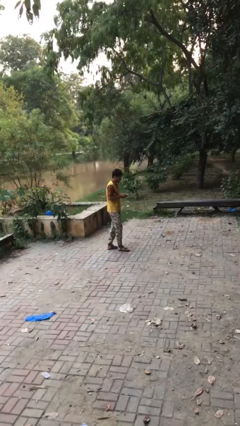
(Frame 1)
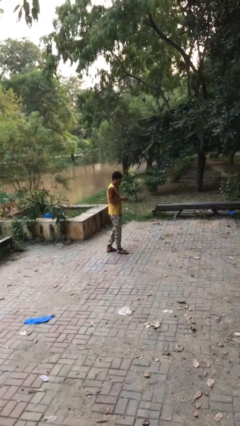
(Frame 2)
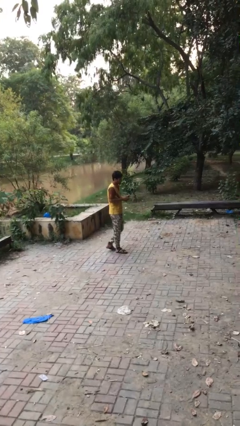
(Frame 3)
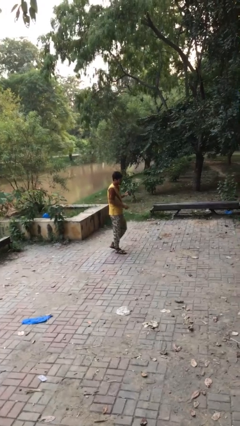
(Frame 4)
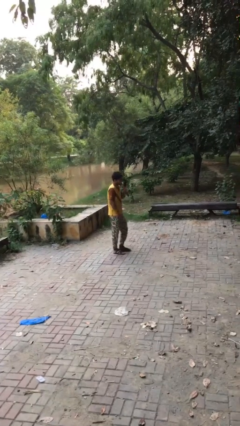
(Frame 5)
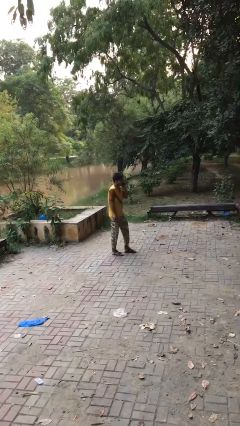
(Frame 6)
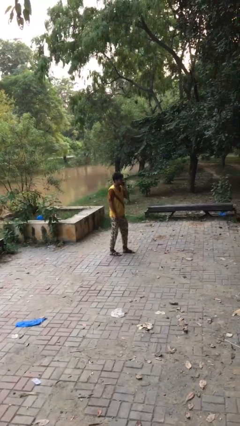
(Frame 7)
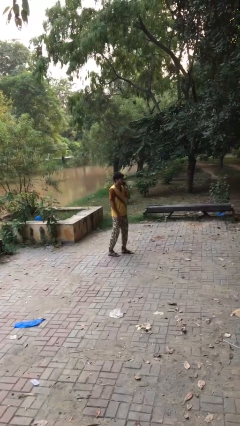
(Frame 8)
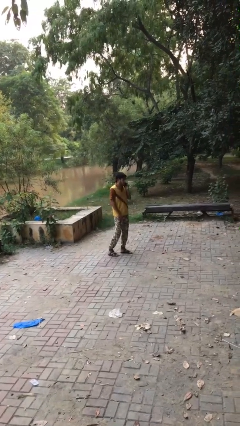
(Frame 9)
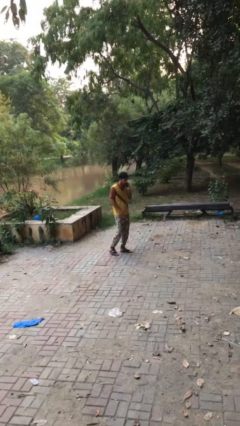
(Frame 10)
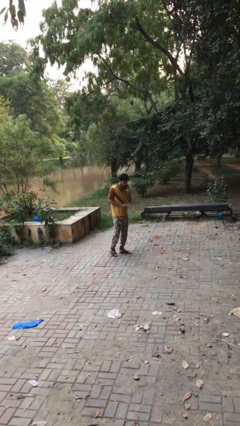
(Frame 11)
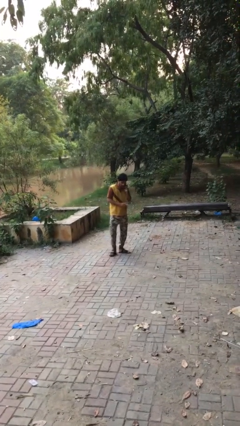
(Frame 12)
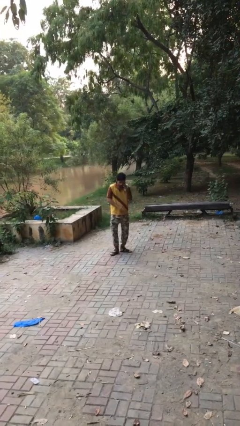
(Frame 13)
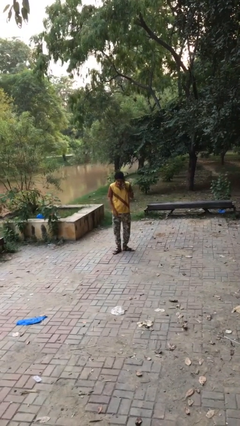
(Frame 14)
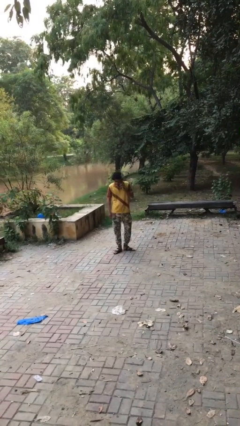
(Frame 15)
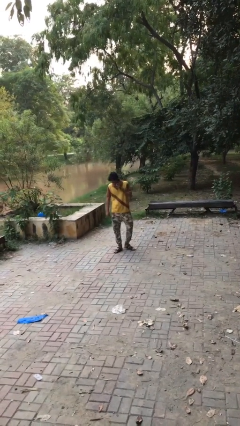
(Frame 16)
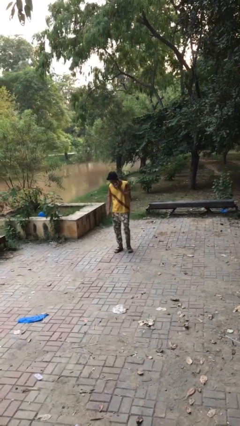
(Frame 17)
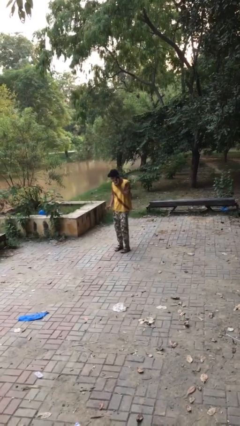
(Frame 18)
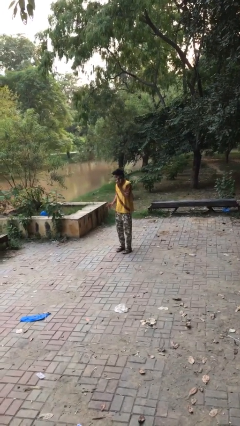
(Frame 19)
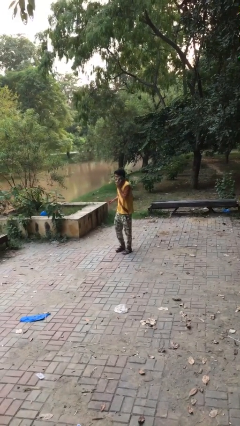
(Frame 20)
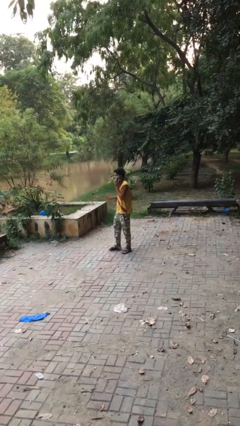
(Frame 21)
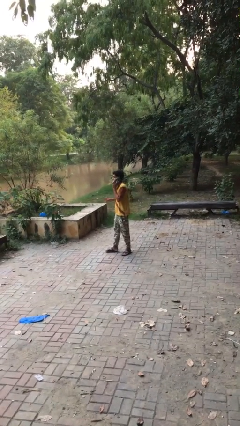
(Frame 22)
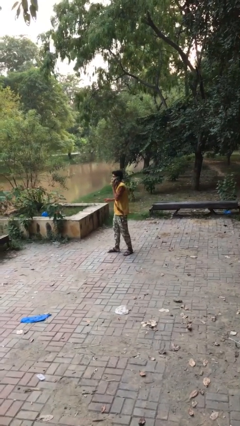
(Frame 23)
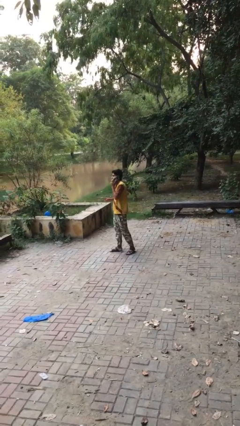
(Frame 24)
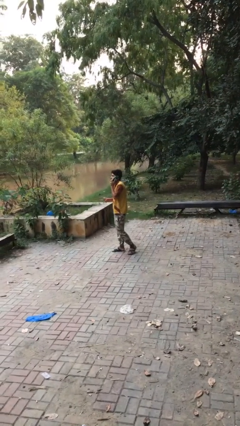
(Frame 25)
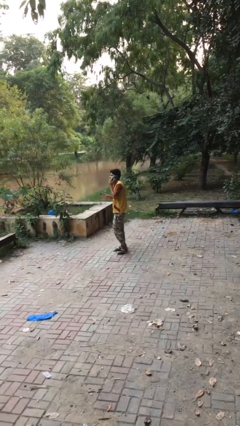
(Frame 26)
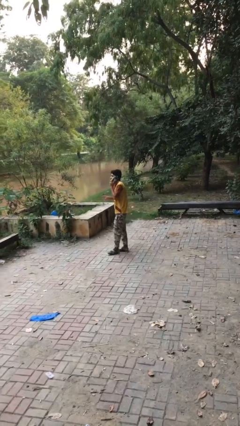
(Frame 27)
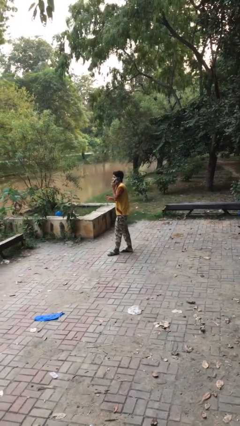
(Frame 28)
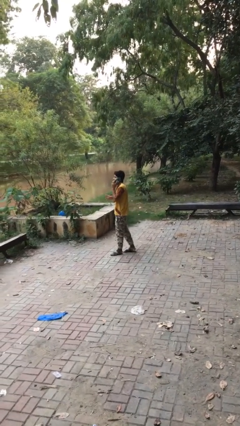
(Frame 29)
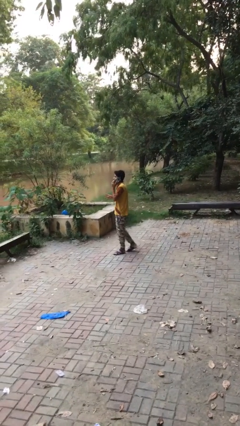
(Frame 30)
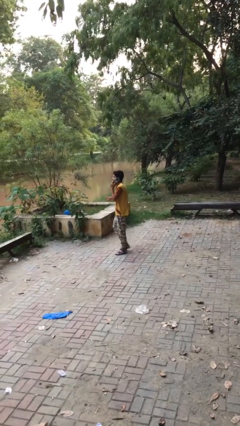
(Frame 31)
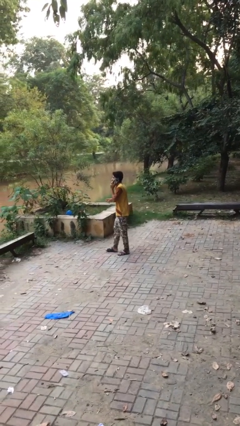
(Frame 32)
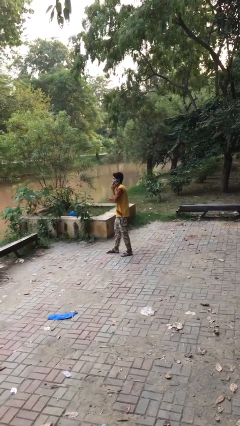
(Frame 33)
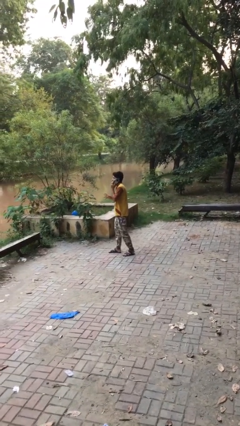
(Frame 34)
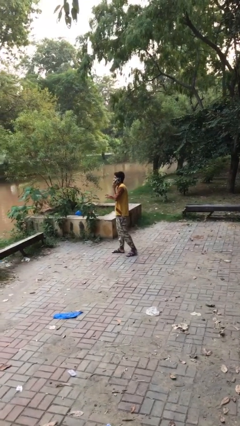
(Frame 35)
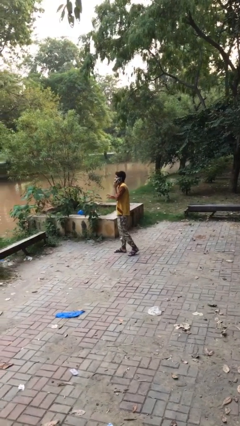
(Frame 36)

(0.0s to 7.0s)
person talks on phone

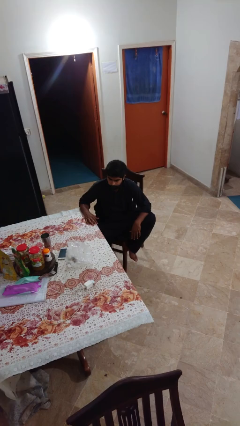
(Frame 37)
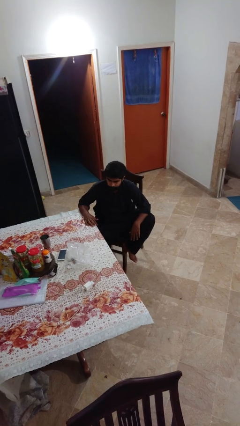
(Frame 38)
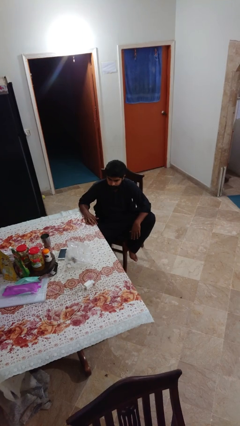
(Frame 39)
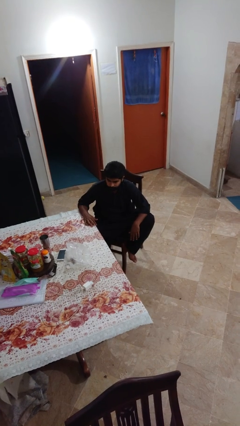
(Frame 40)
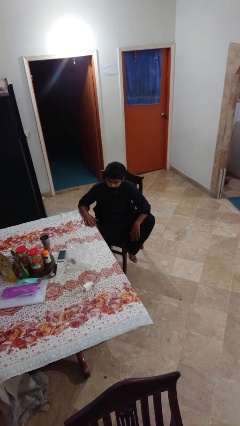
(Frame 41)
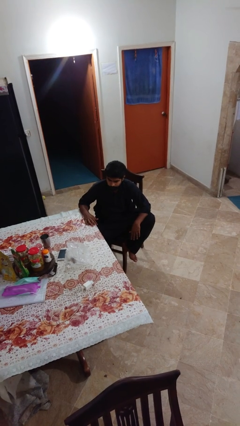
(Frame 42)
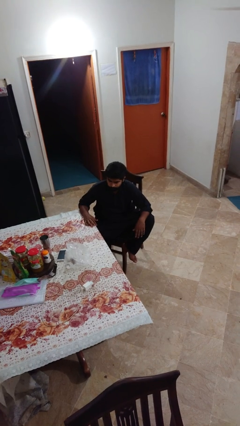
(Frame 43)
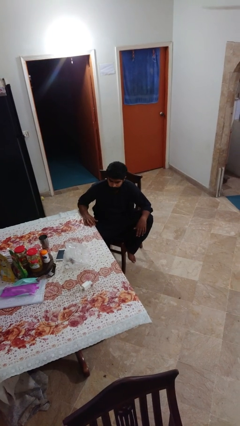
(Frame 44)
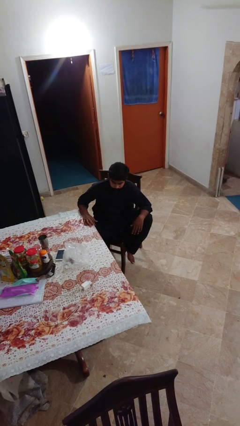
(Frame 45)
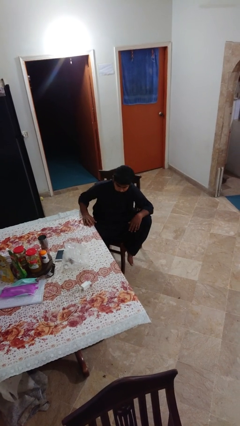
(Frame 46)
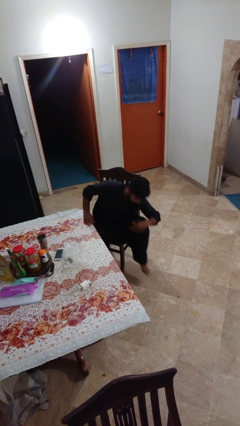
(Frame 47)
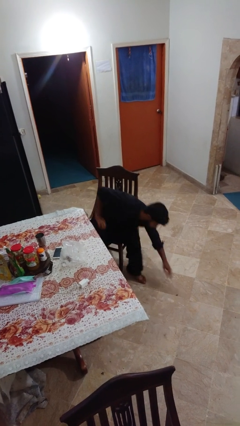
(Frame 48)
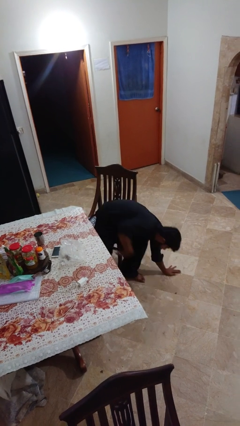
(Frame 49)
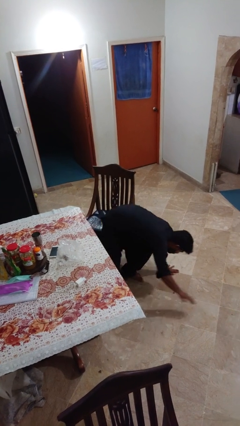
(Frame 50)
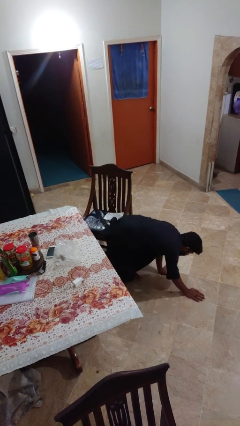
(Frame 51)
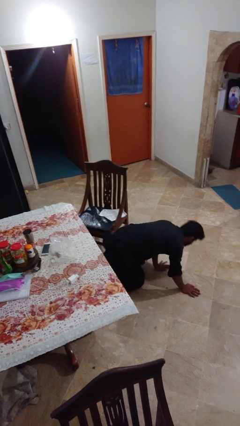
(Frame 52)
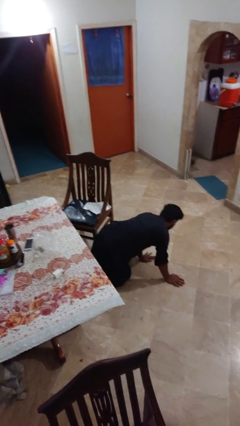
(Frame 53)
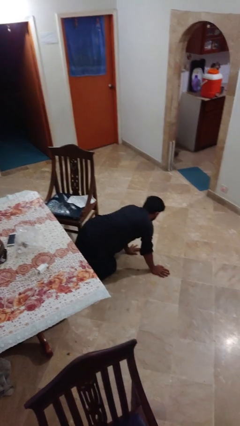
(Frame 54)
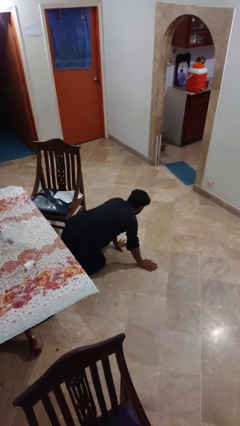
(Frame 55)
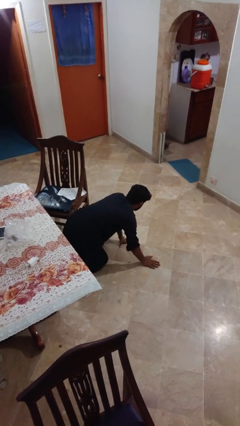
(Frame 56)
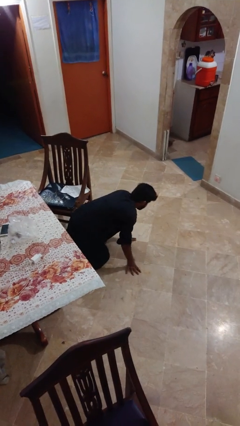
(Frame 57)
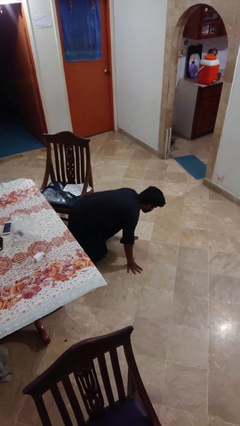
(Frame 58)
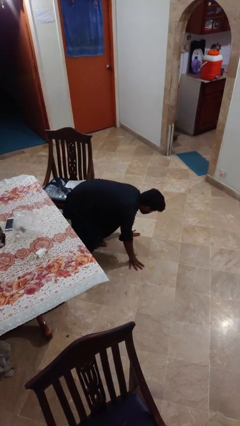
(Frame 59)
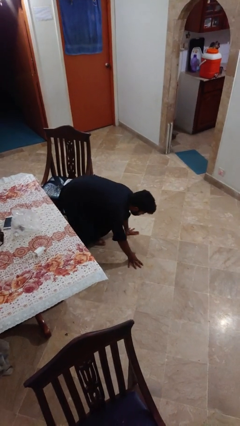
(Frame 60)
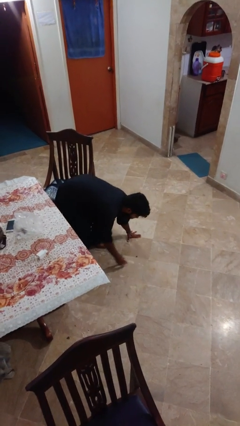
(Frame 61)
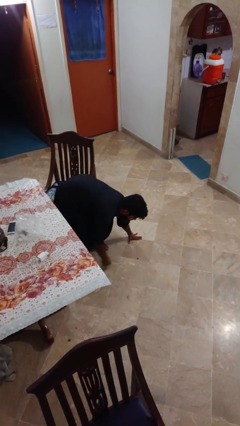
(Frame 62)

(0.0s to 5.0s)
person falls from chair

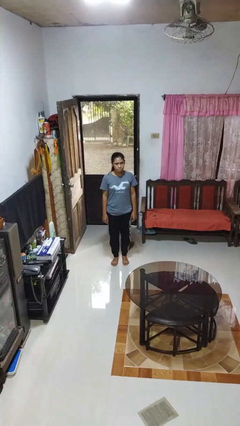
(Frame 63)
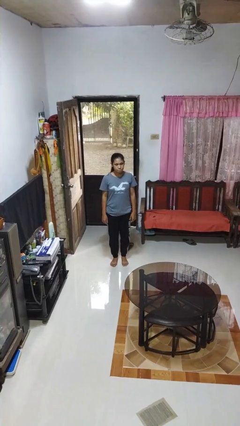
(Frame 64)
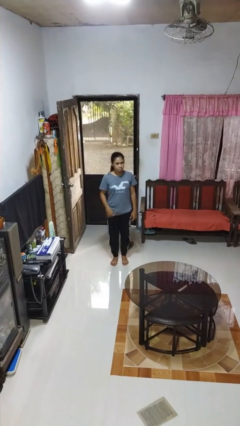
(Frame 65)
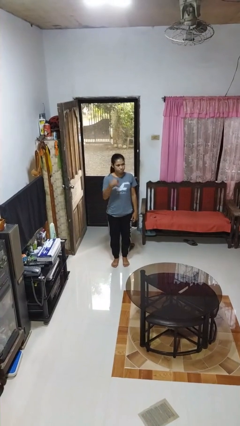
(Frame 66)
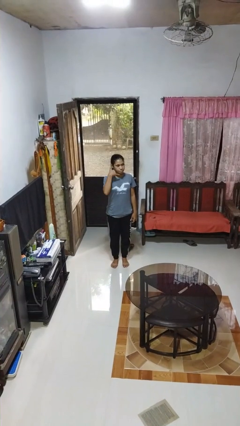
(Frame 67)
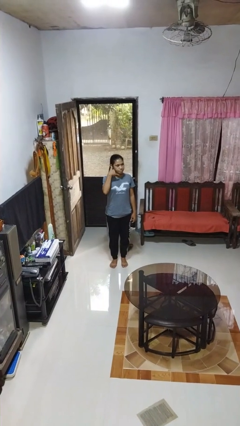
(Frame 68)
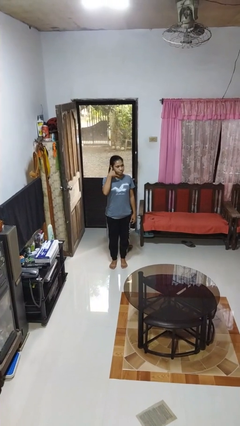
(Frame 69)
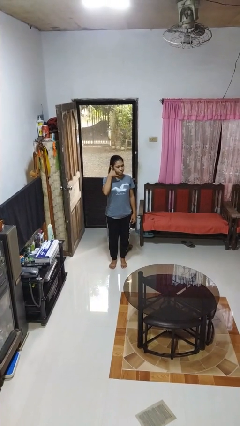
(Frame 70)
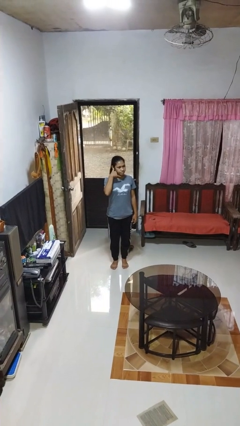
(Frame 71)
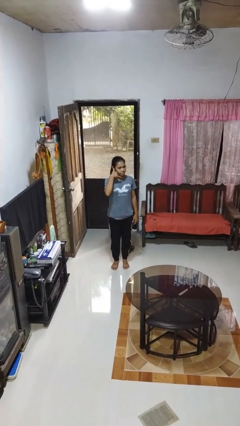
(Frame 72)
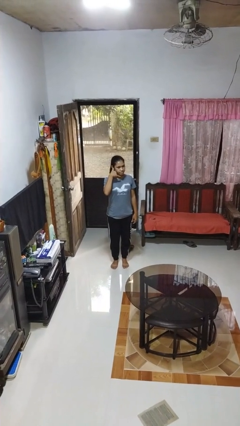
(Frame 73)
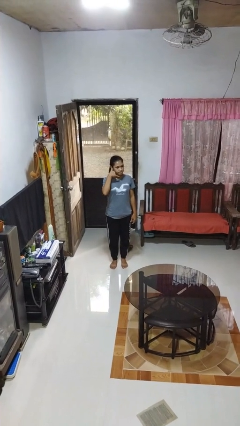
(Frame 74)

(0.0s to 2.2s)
person gestures call me

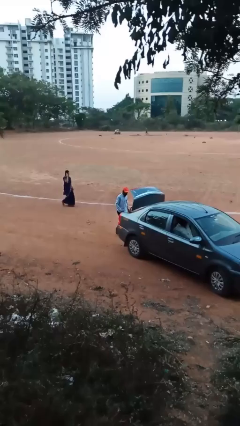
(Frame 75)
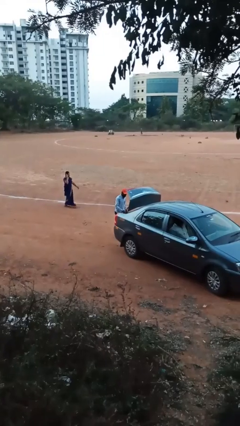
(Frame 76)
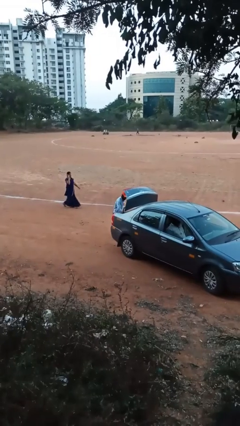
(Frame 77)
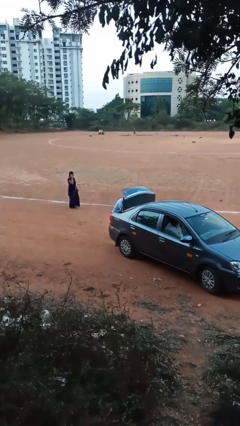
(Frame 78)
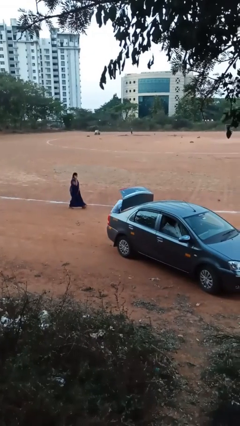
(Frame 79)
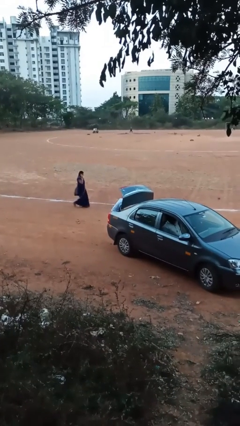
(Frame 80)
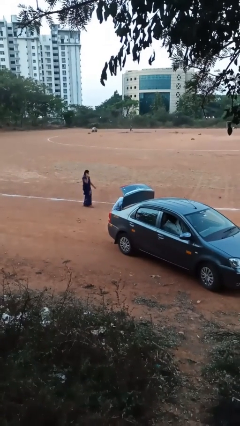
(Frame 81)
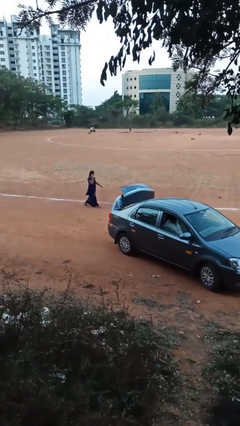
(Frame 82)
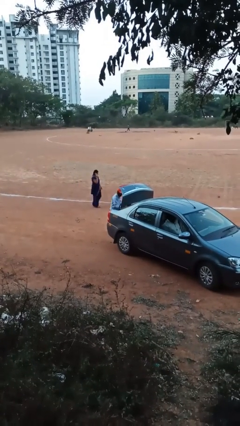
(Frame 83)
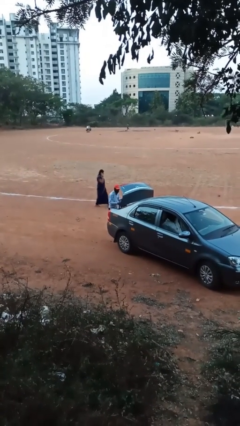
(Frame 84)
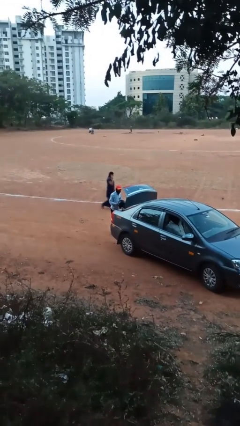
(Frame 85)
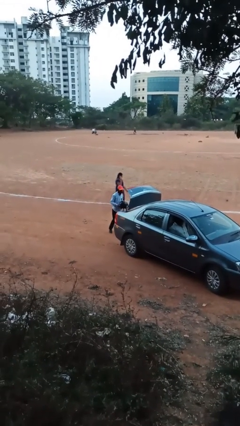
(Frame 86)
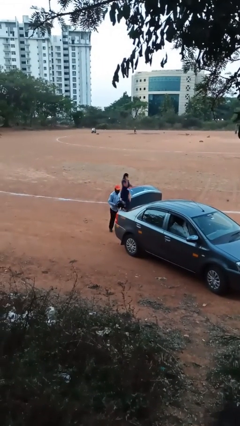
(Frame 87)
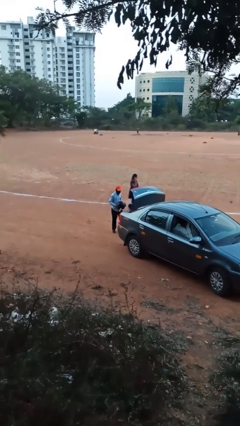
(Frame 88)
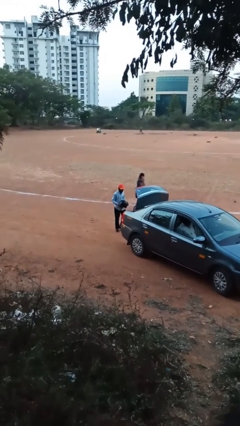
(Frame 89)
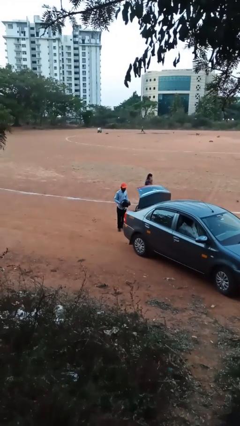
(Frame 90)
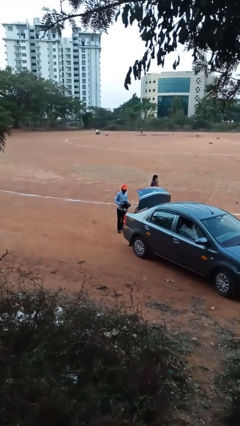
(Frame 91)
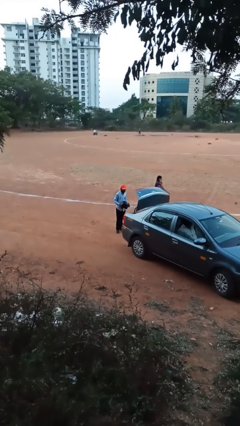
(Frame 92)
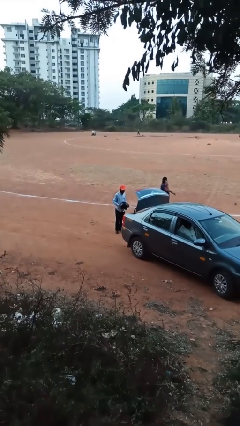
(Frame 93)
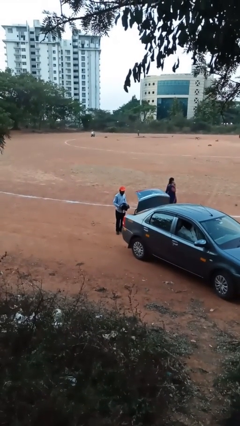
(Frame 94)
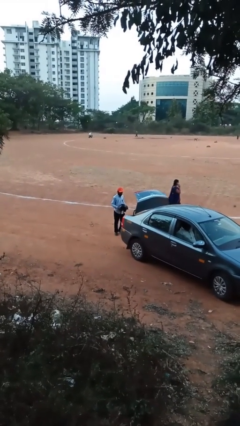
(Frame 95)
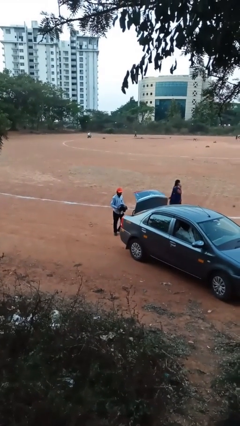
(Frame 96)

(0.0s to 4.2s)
person unloads car
